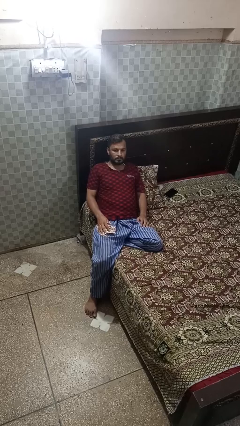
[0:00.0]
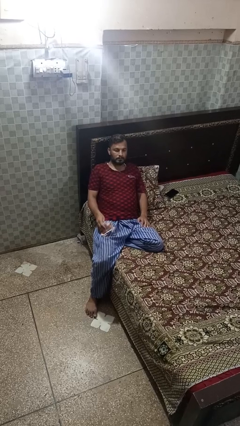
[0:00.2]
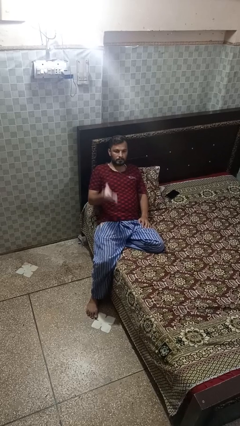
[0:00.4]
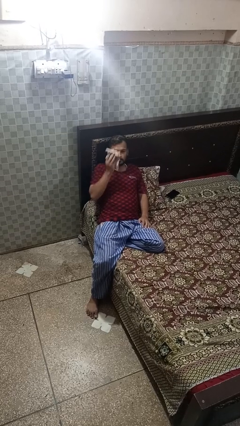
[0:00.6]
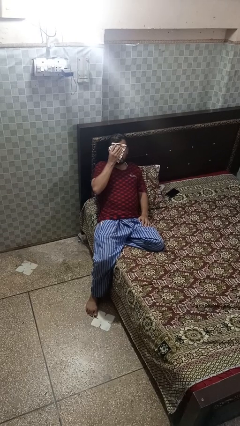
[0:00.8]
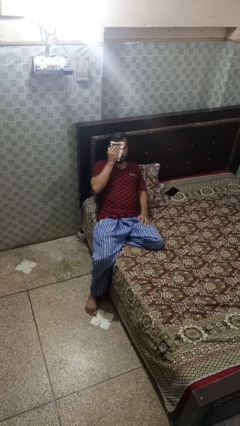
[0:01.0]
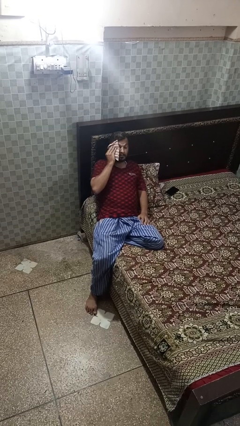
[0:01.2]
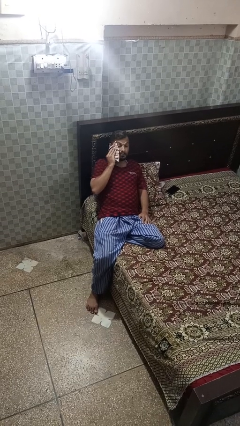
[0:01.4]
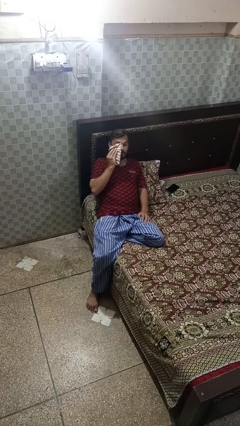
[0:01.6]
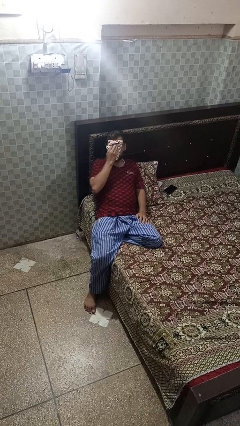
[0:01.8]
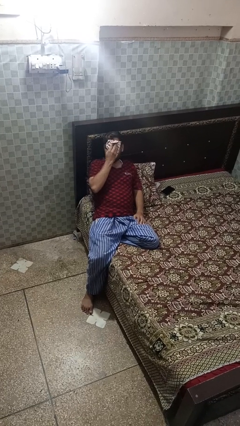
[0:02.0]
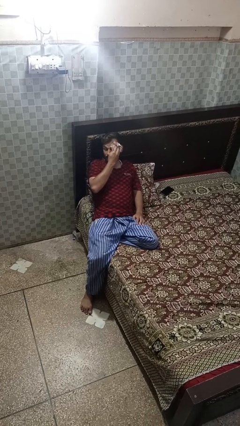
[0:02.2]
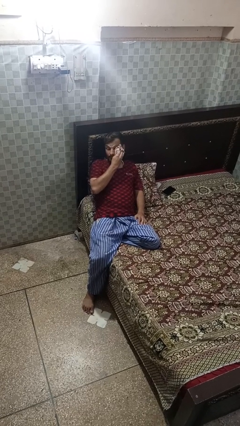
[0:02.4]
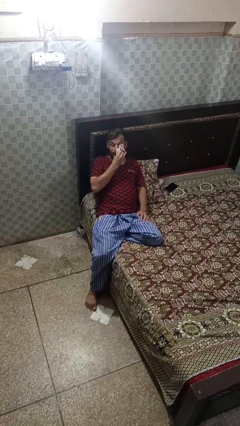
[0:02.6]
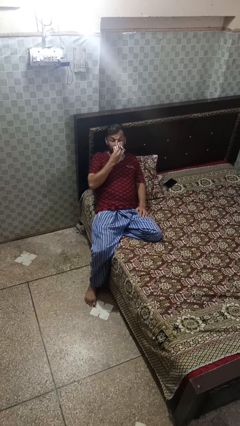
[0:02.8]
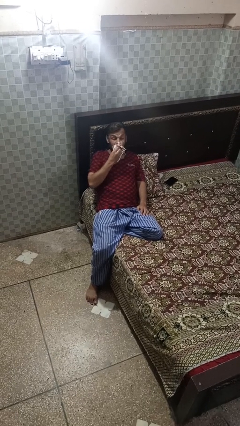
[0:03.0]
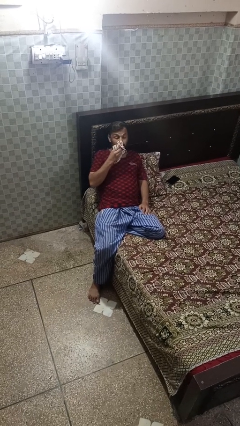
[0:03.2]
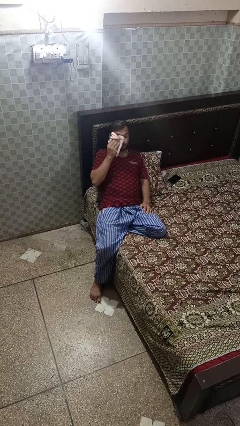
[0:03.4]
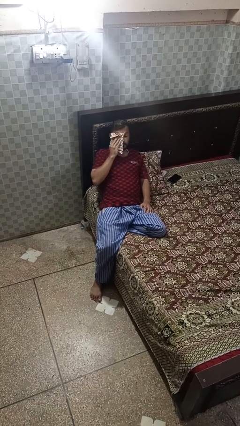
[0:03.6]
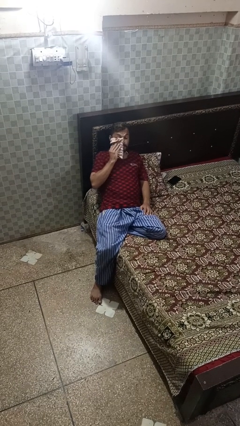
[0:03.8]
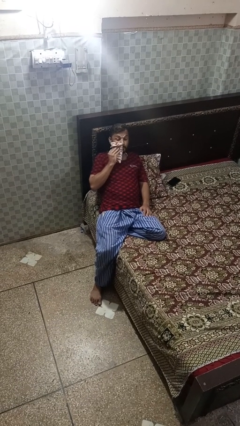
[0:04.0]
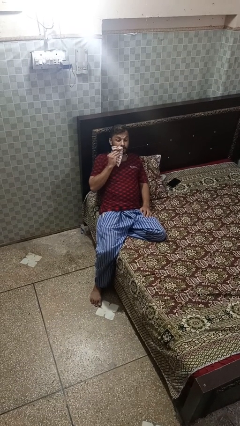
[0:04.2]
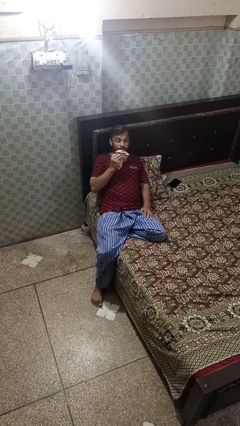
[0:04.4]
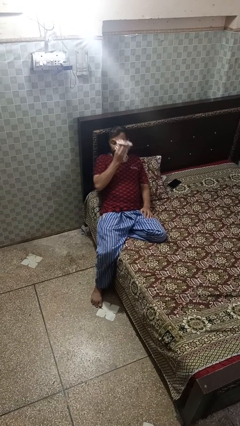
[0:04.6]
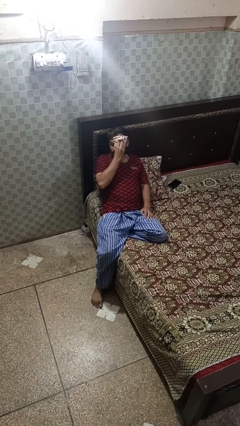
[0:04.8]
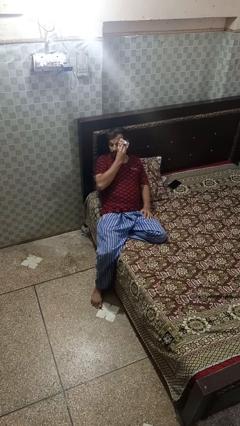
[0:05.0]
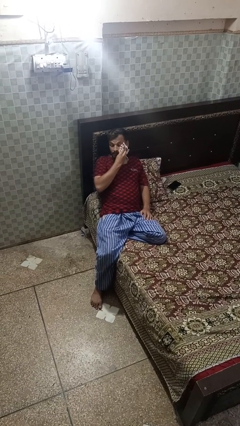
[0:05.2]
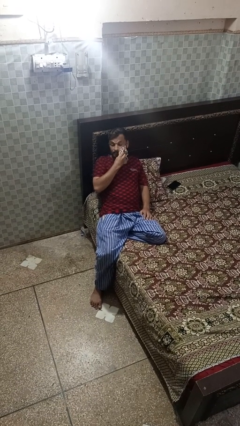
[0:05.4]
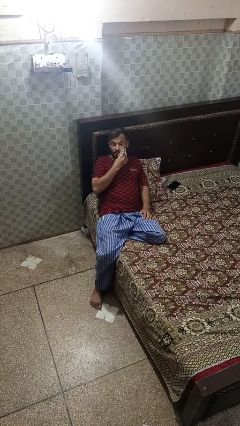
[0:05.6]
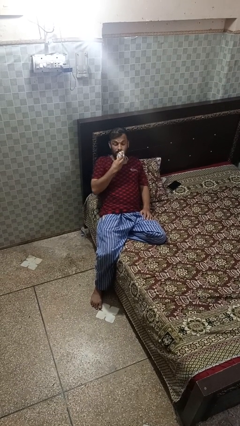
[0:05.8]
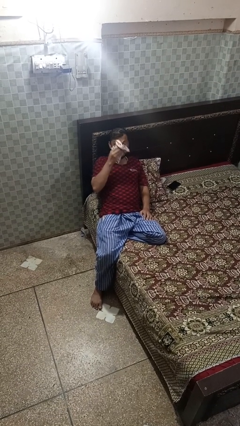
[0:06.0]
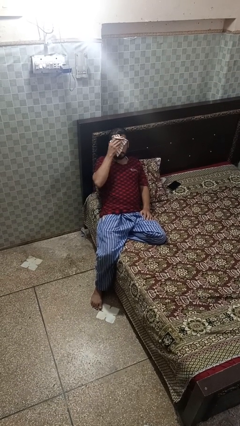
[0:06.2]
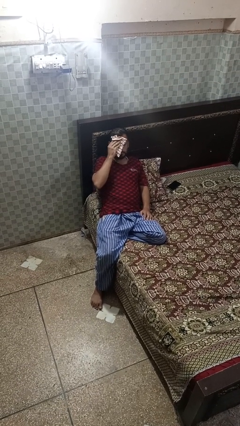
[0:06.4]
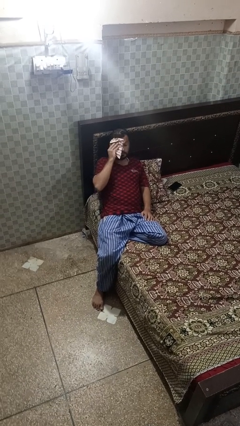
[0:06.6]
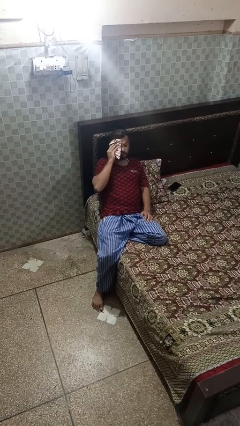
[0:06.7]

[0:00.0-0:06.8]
person wipes mouth with napkin

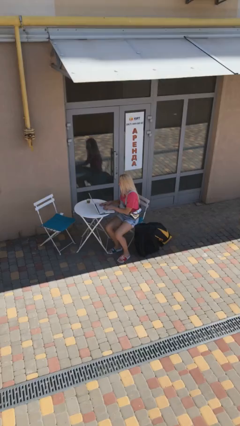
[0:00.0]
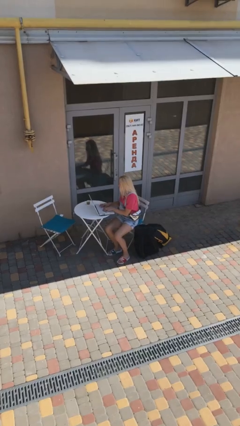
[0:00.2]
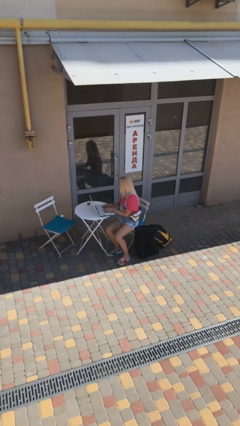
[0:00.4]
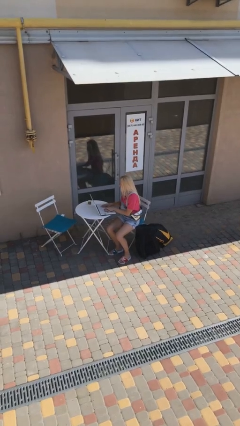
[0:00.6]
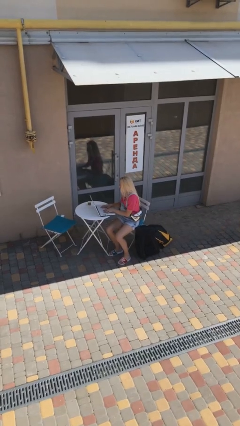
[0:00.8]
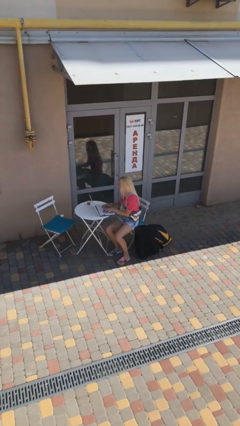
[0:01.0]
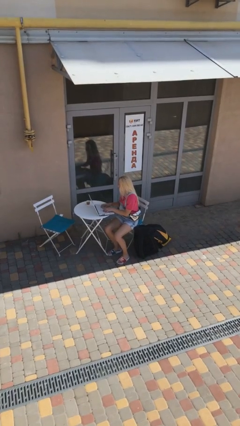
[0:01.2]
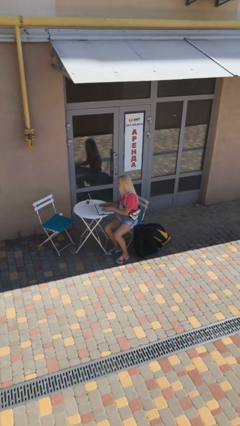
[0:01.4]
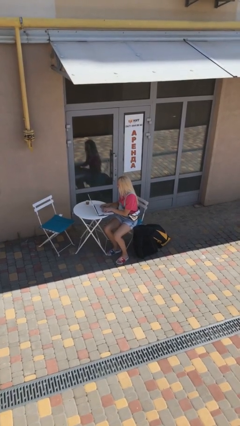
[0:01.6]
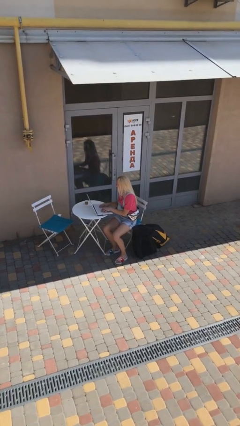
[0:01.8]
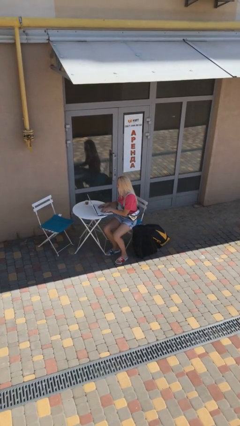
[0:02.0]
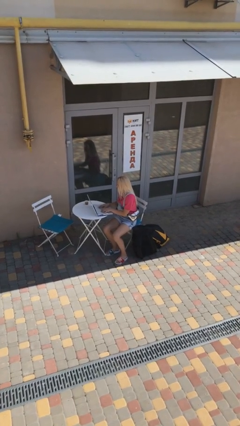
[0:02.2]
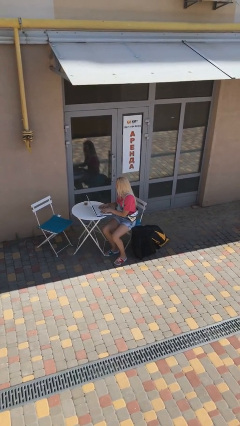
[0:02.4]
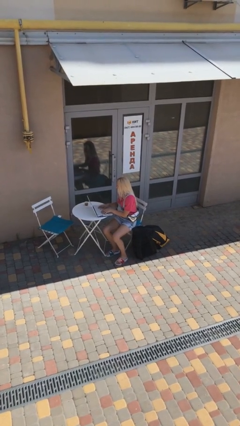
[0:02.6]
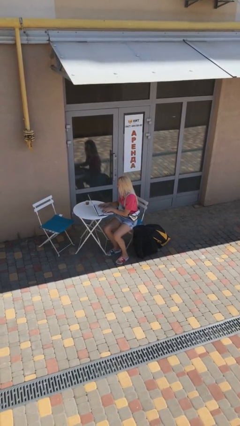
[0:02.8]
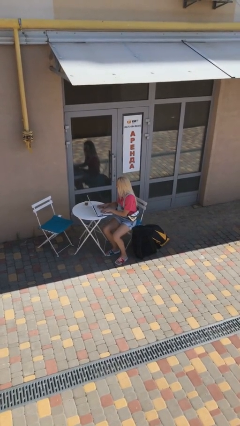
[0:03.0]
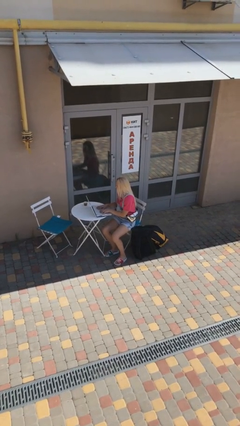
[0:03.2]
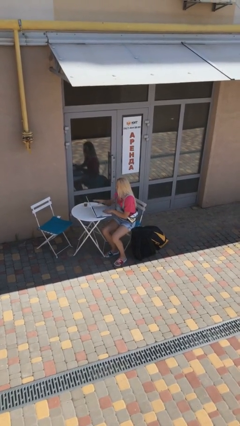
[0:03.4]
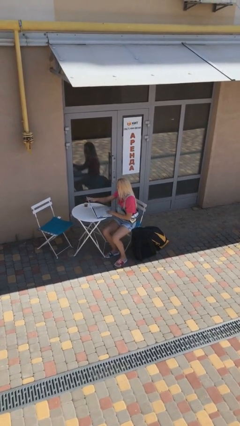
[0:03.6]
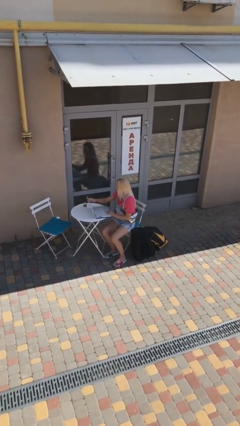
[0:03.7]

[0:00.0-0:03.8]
person interacts with laptop

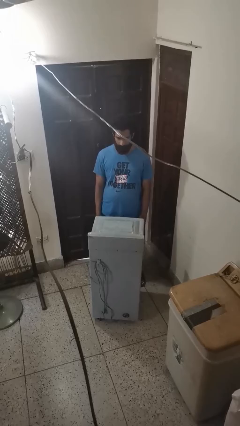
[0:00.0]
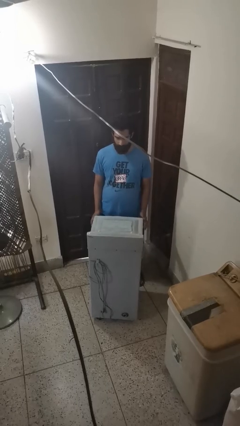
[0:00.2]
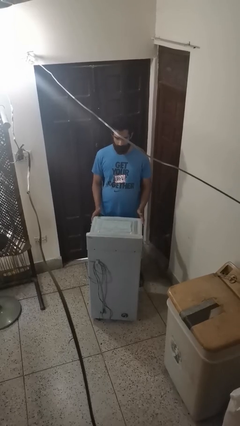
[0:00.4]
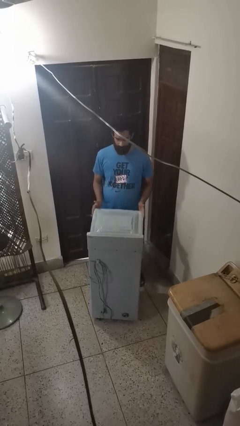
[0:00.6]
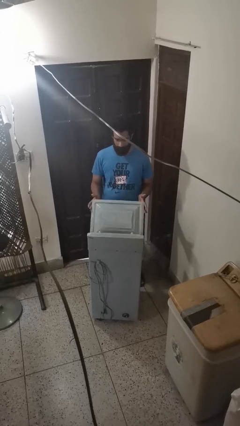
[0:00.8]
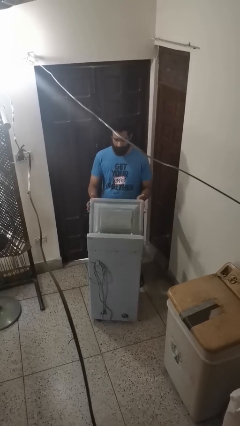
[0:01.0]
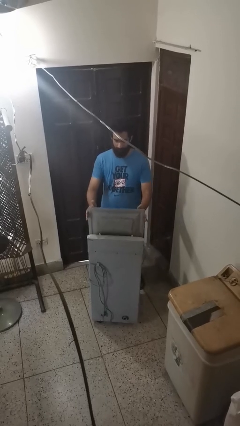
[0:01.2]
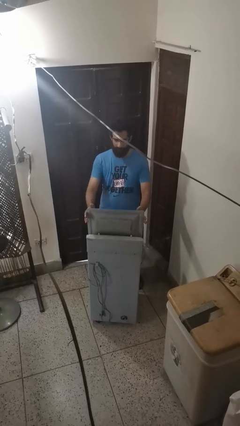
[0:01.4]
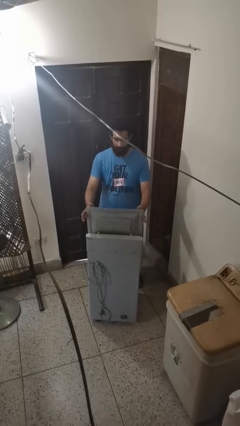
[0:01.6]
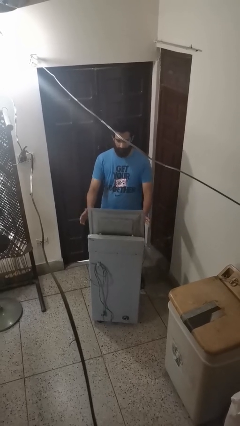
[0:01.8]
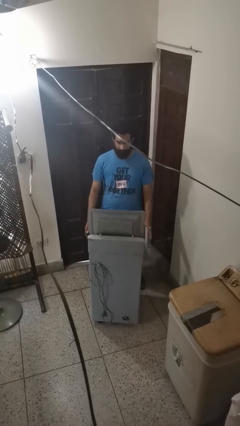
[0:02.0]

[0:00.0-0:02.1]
person opens clothes washer

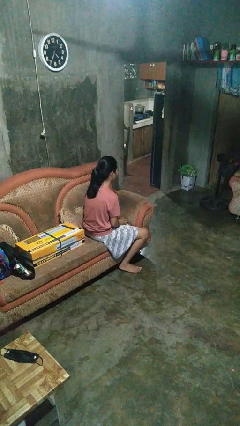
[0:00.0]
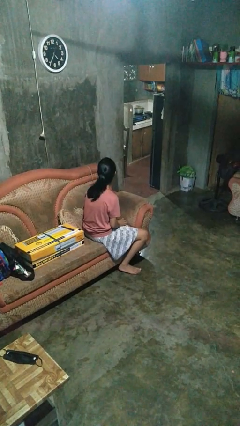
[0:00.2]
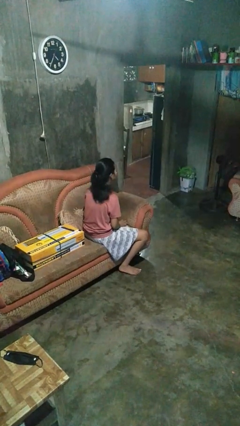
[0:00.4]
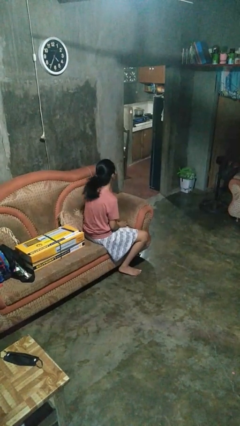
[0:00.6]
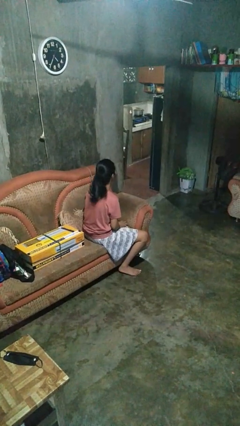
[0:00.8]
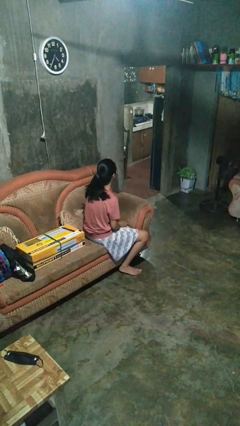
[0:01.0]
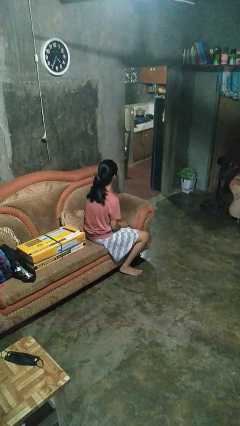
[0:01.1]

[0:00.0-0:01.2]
person shakes head

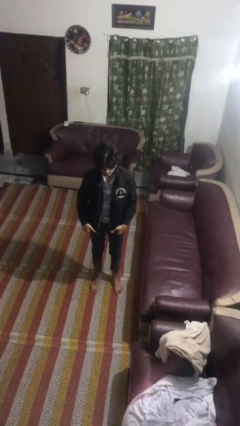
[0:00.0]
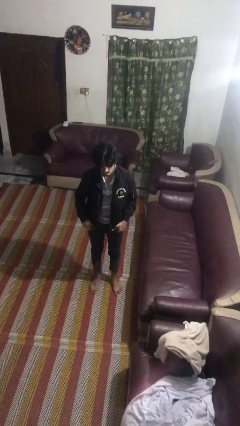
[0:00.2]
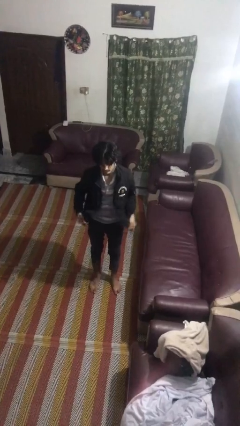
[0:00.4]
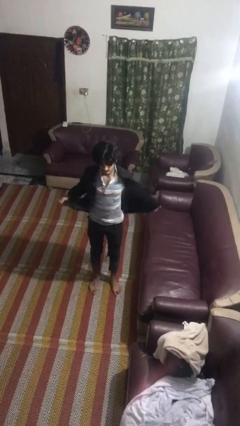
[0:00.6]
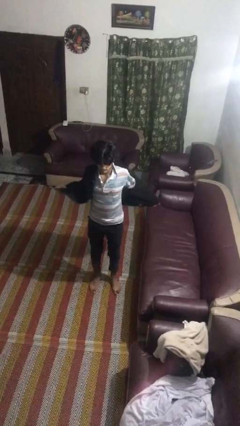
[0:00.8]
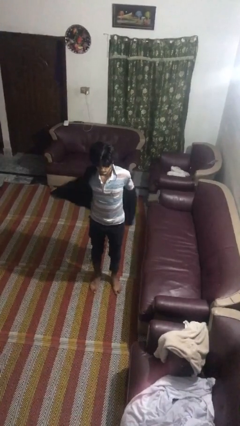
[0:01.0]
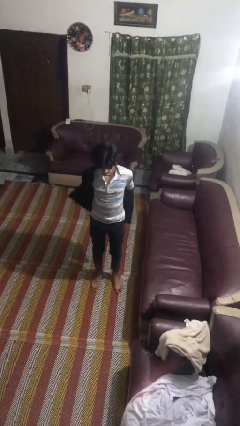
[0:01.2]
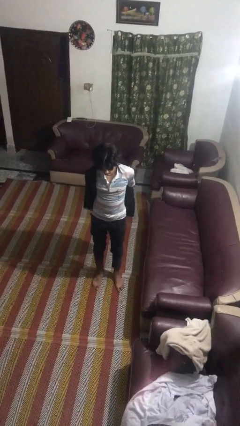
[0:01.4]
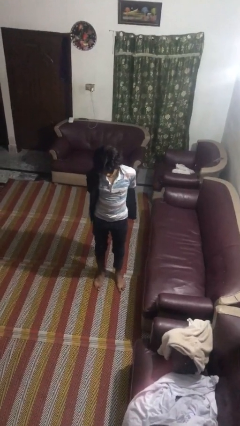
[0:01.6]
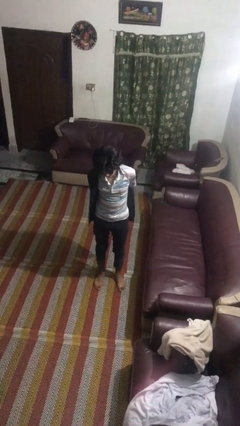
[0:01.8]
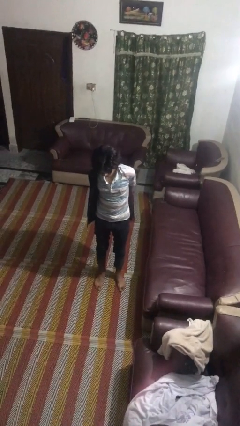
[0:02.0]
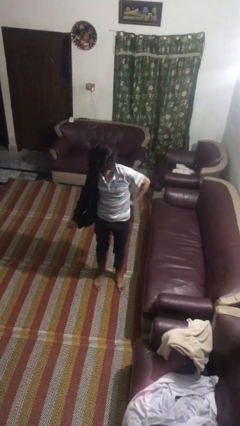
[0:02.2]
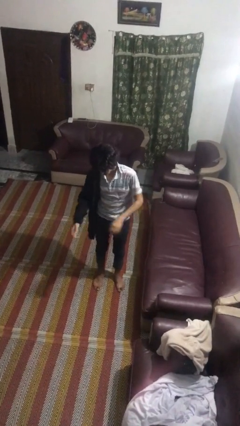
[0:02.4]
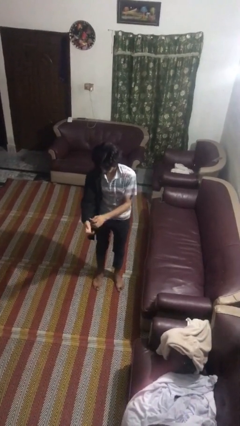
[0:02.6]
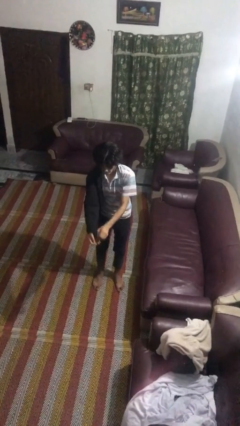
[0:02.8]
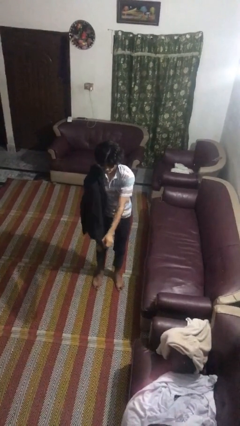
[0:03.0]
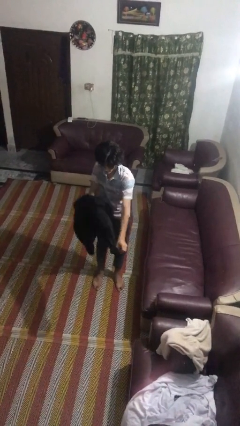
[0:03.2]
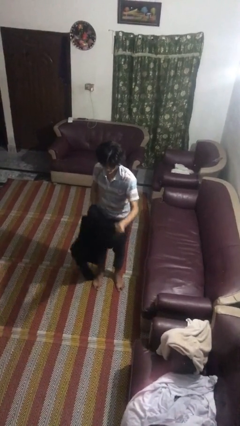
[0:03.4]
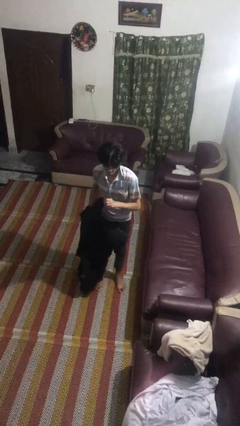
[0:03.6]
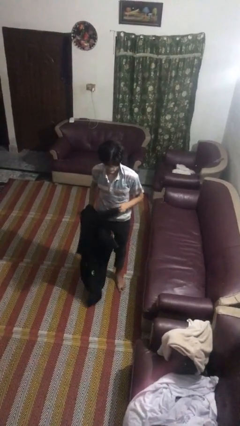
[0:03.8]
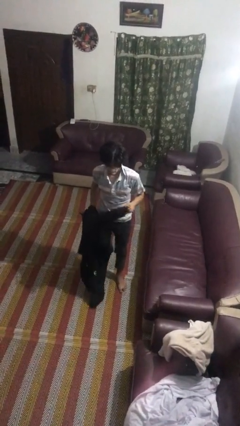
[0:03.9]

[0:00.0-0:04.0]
person takes off jacket
